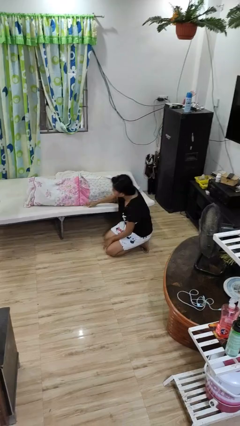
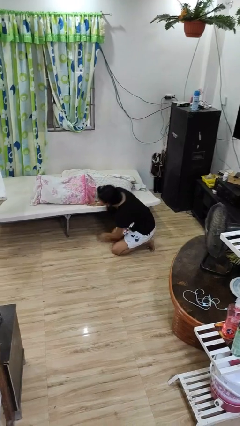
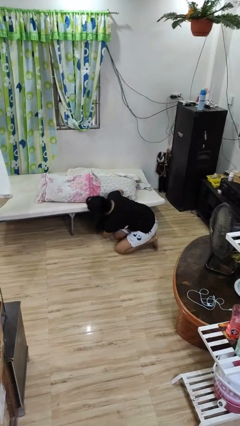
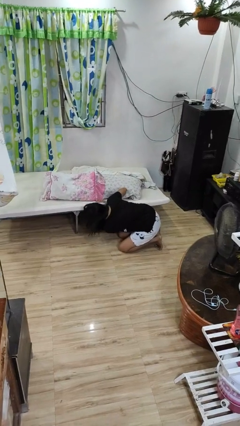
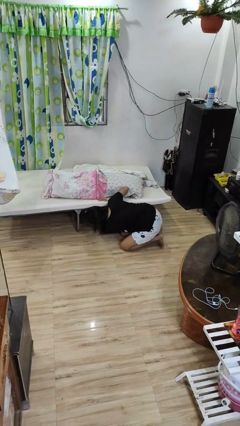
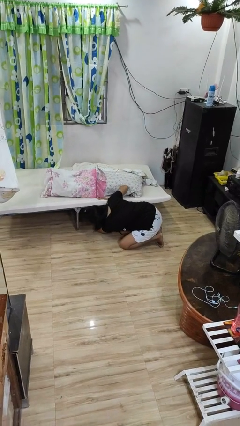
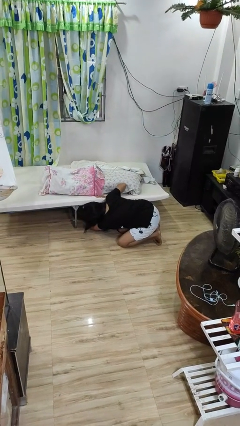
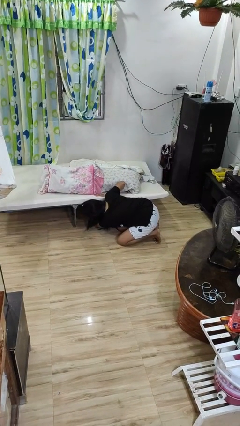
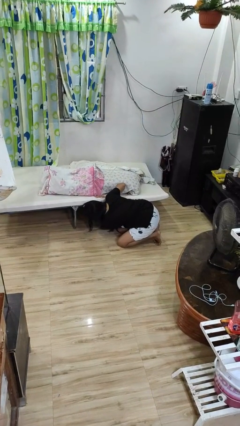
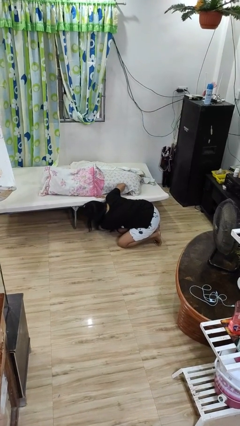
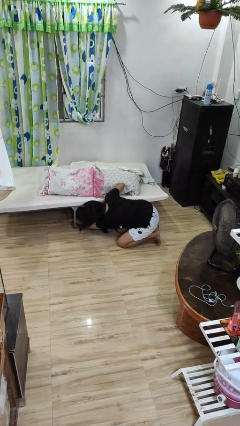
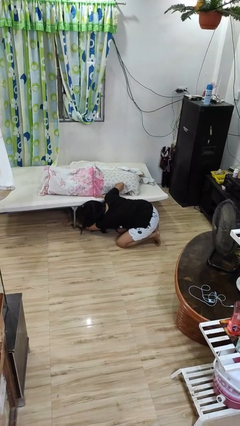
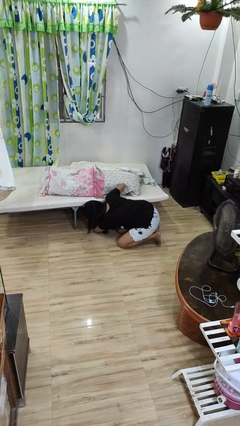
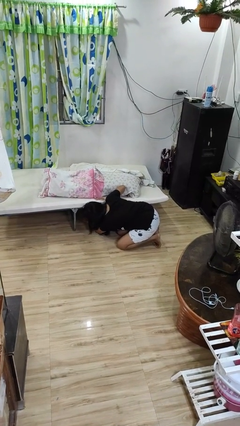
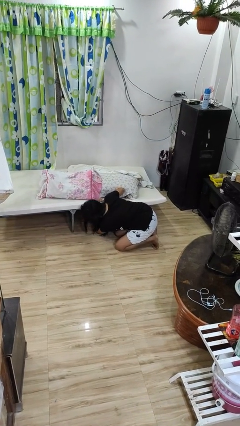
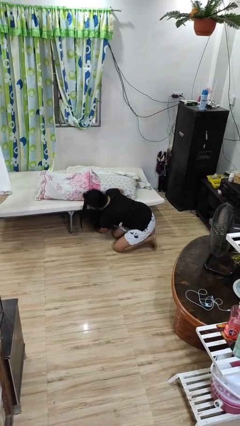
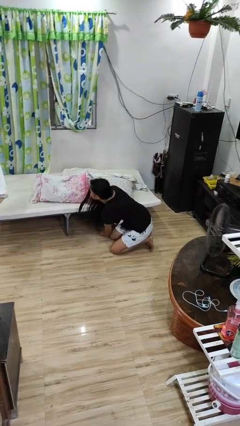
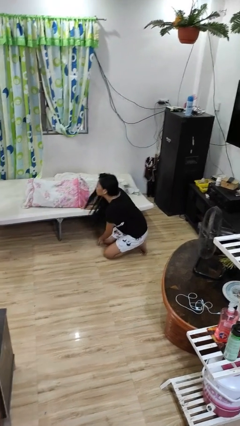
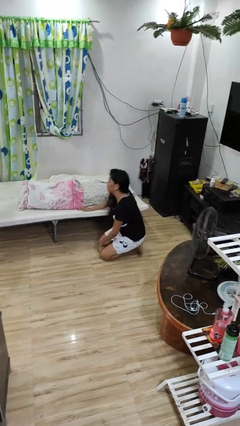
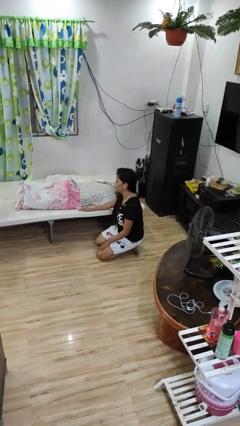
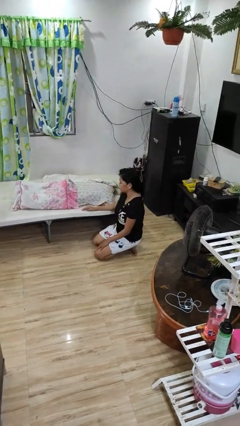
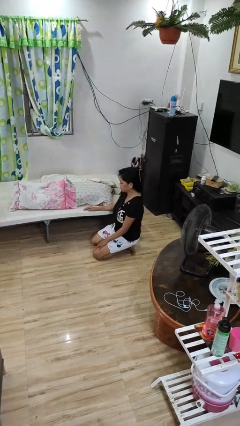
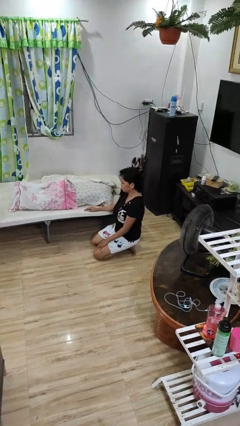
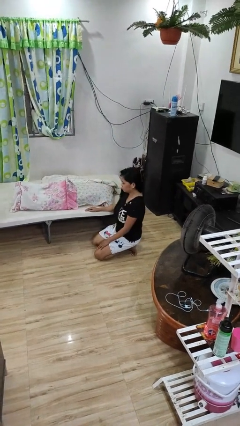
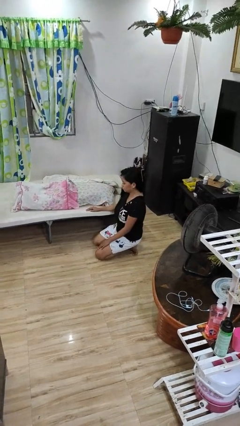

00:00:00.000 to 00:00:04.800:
person searches under bed

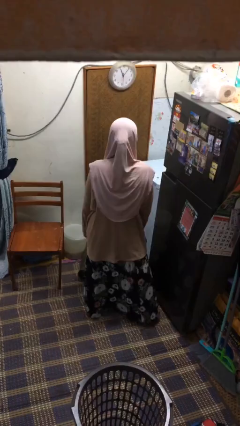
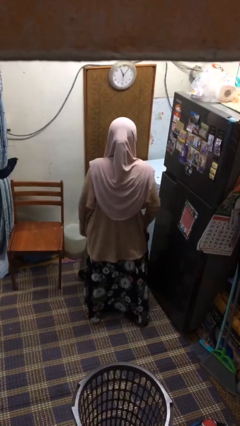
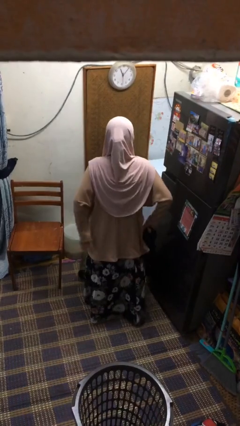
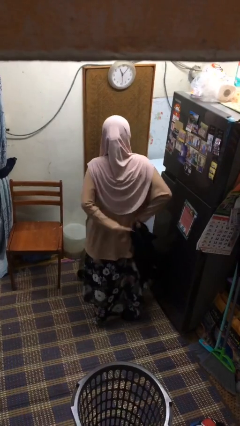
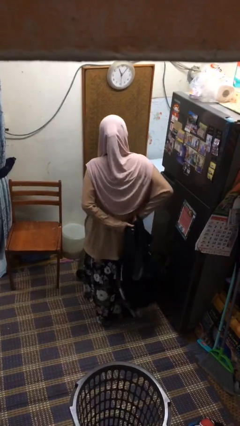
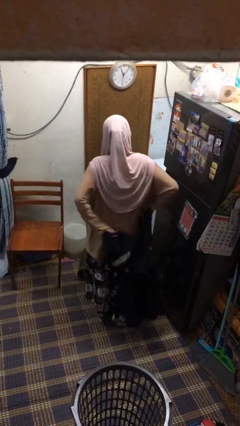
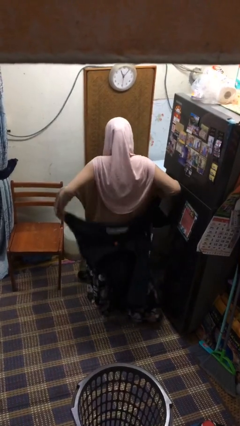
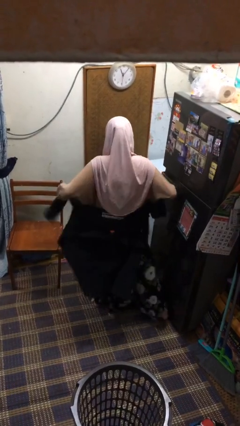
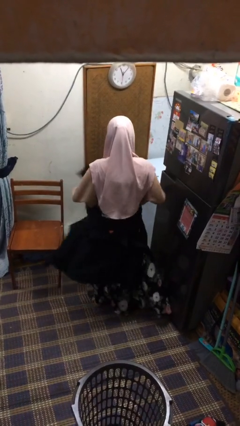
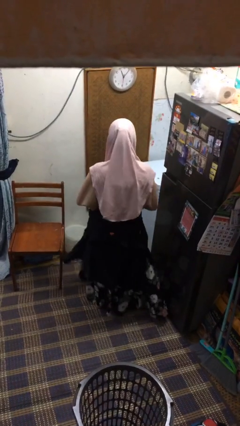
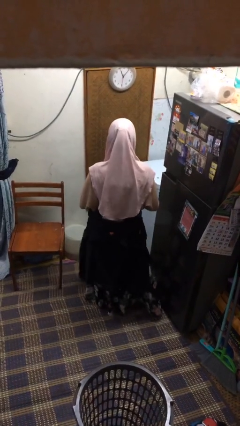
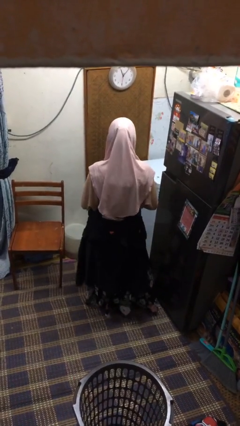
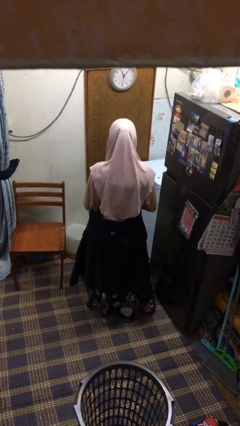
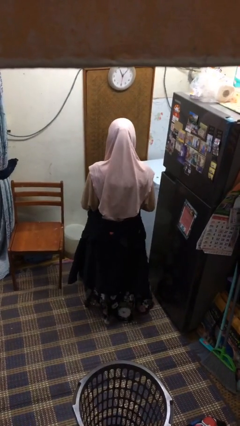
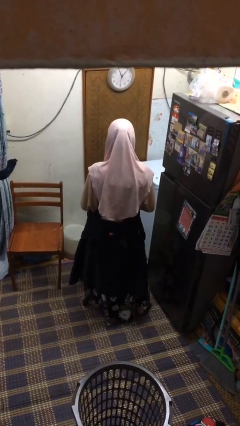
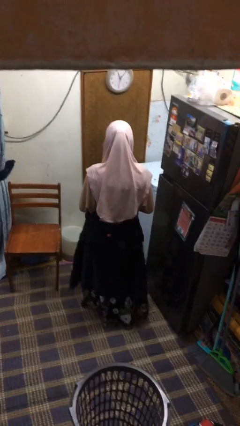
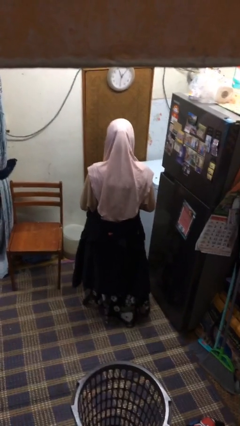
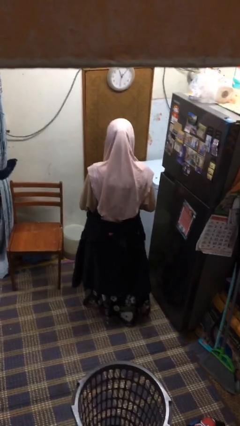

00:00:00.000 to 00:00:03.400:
person ties jacket around waist

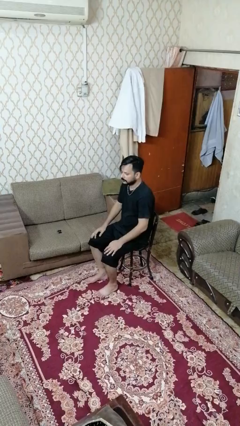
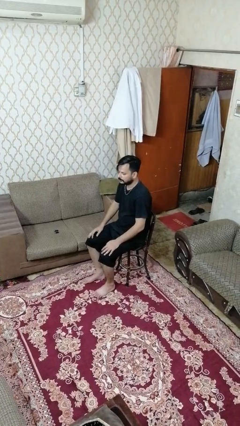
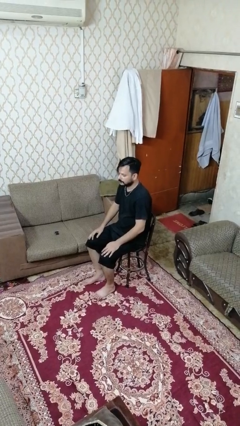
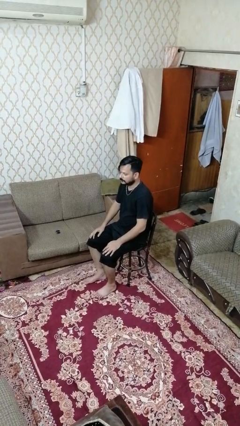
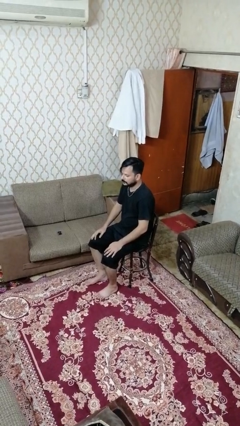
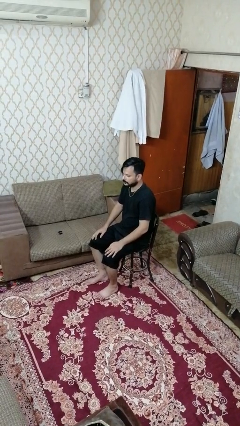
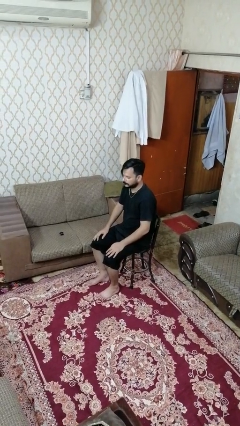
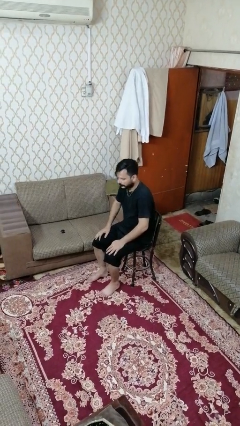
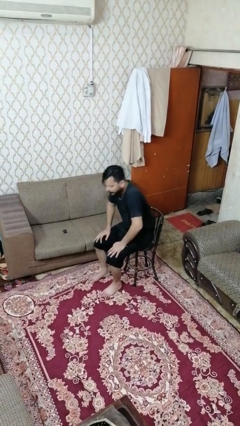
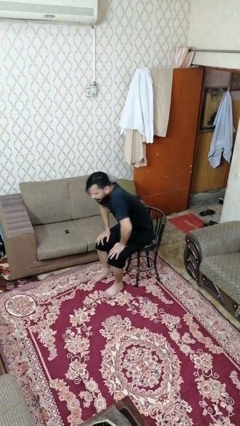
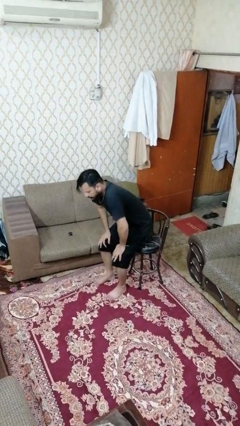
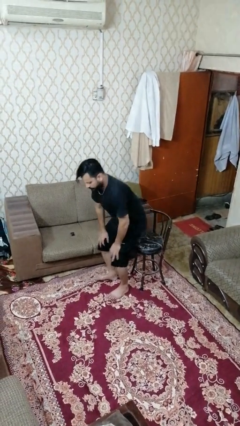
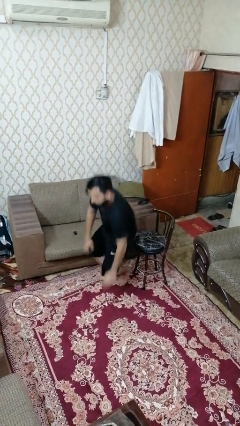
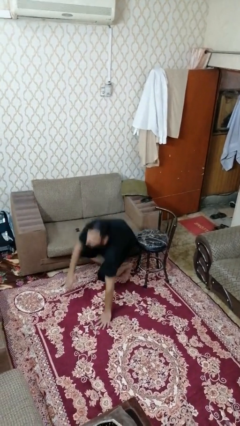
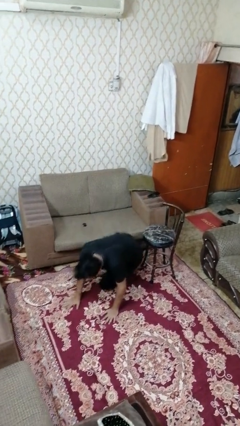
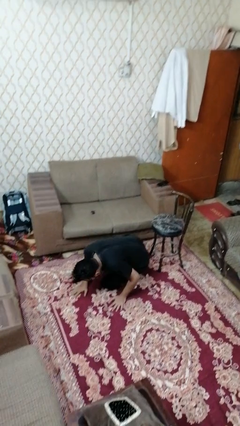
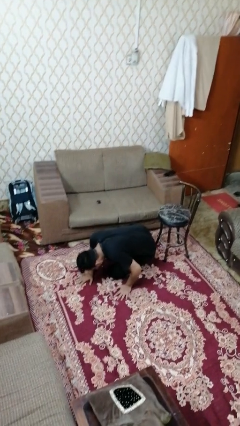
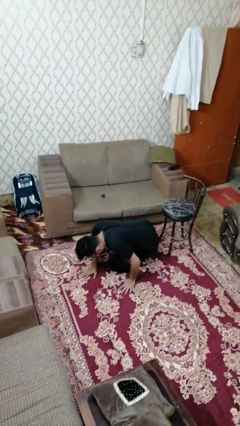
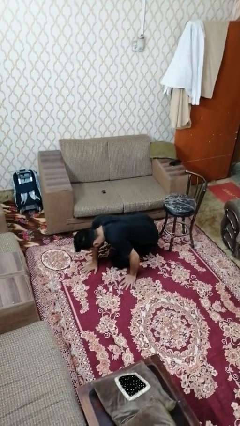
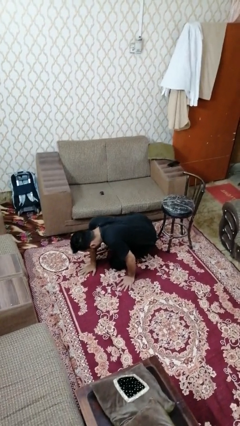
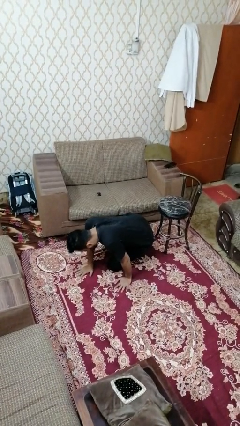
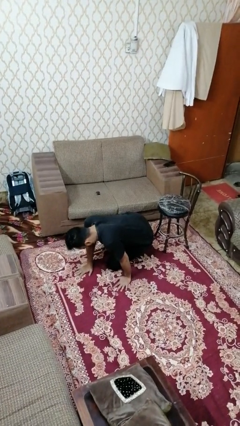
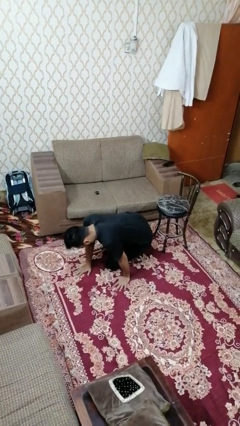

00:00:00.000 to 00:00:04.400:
person falls from chair

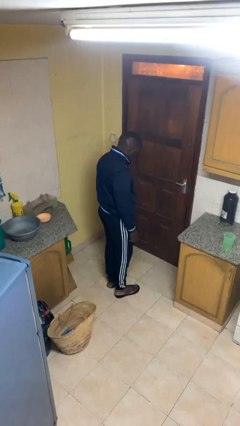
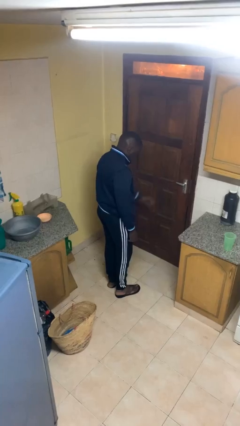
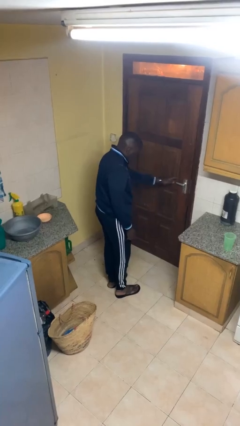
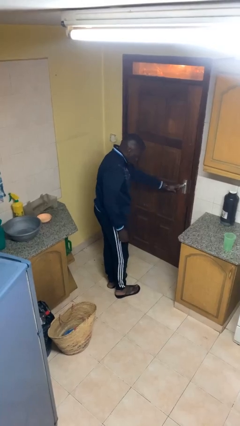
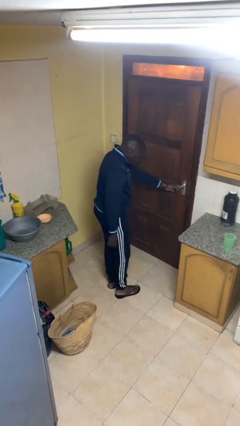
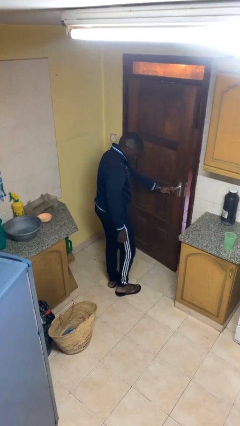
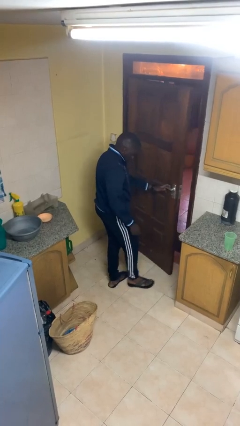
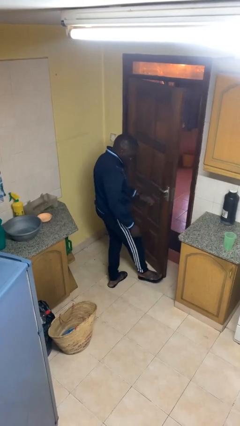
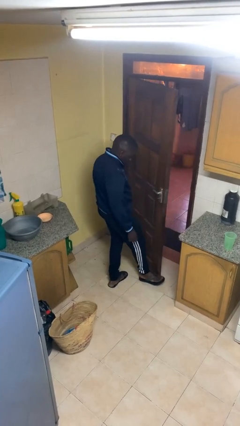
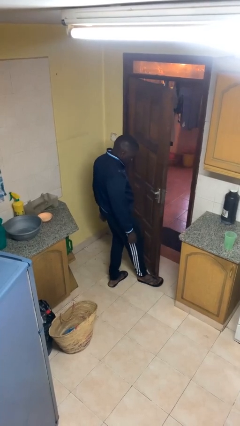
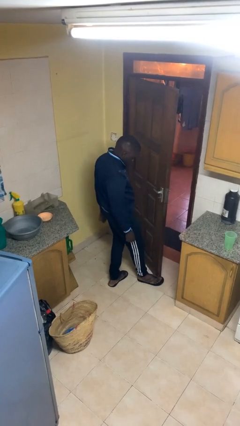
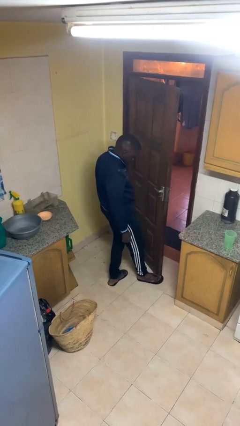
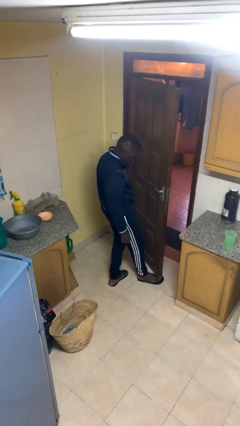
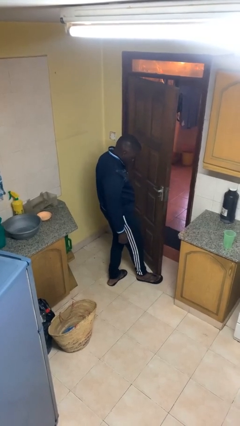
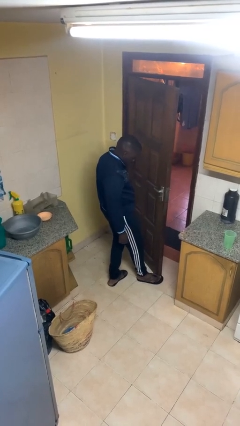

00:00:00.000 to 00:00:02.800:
person opens facility door

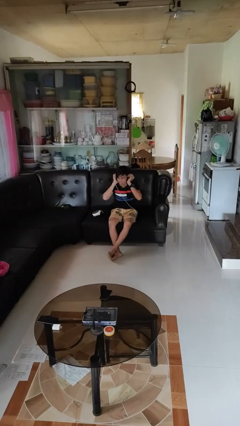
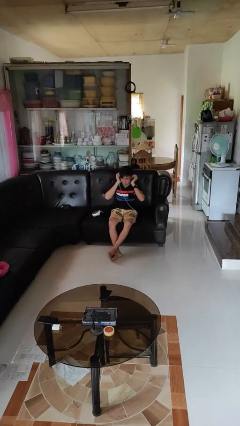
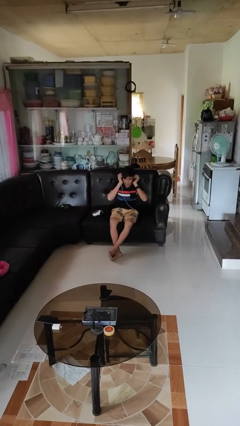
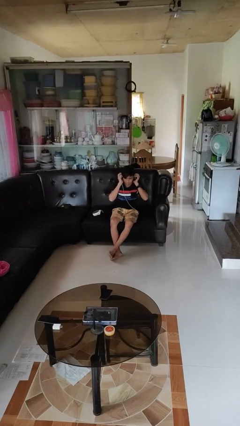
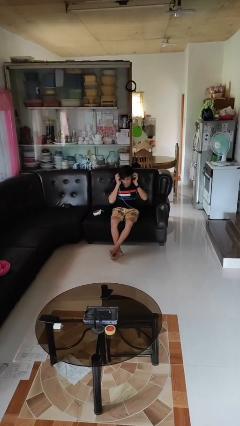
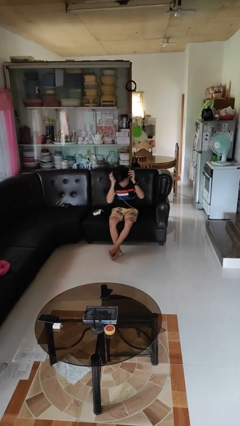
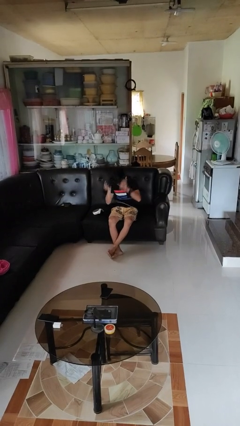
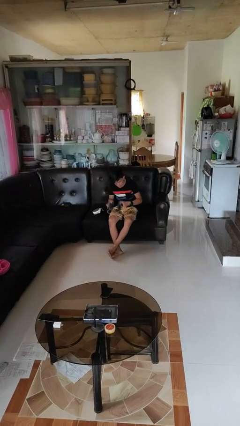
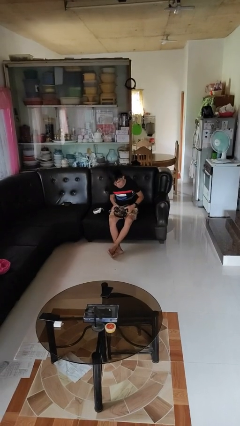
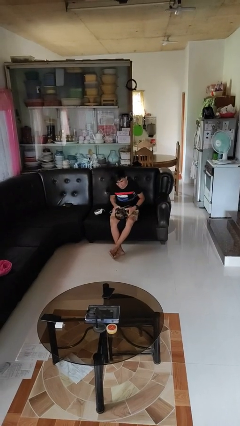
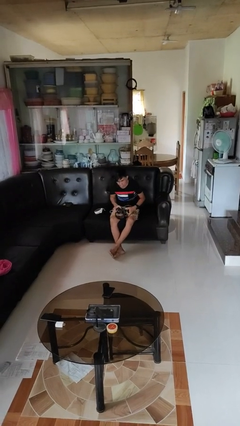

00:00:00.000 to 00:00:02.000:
person takes off headphones
